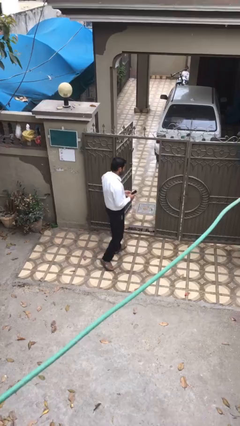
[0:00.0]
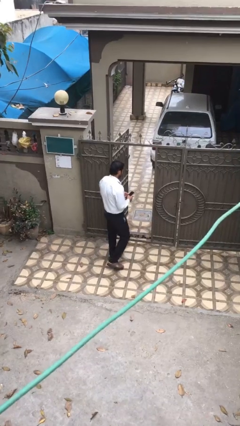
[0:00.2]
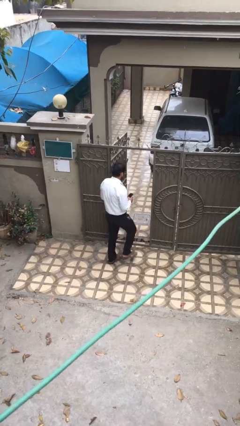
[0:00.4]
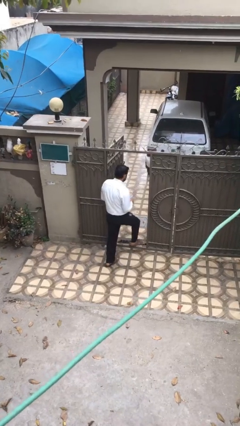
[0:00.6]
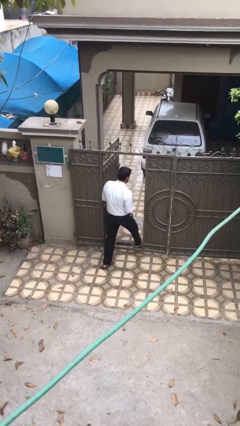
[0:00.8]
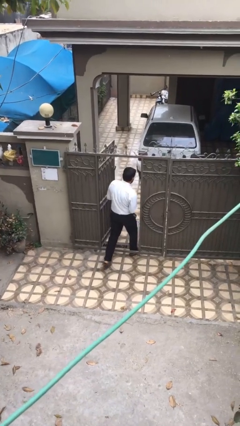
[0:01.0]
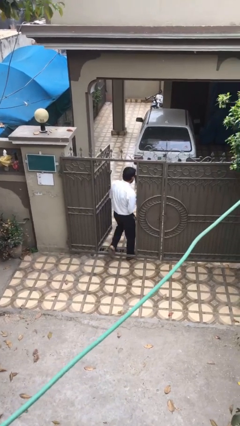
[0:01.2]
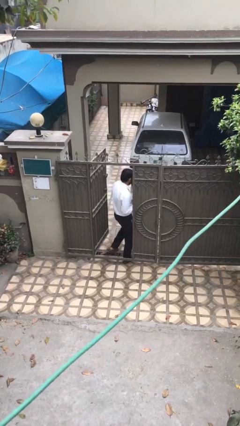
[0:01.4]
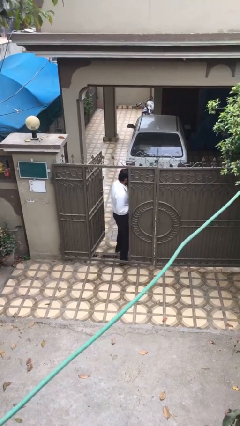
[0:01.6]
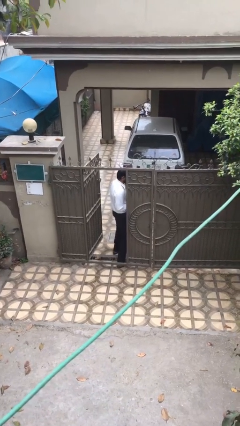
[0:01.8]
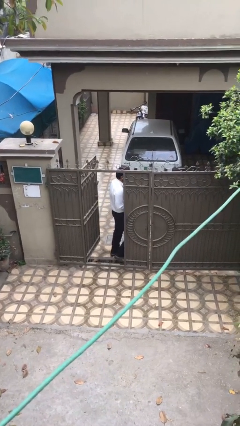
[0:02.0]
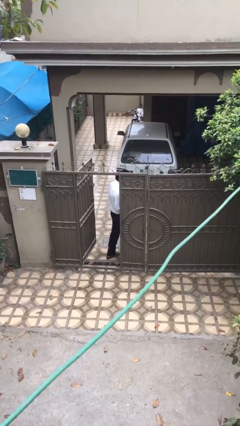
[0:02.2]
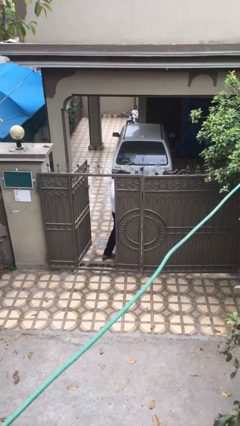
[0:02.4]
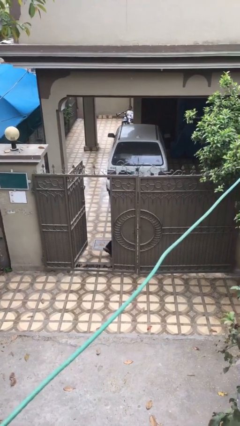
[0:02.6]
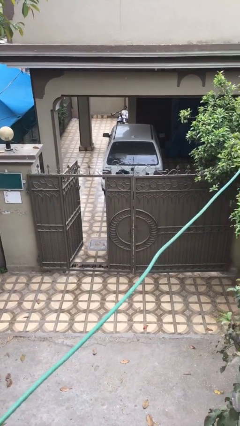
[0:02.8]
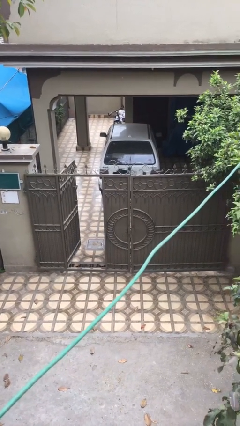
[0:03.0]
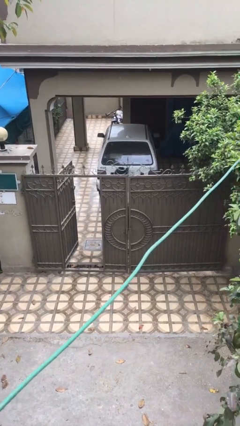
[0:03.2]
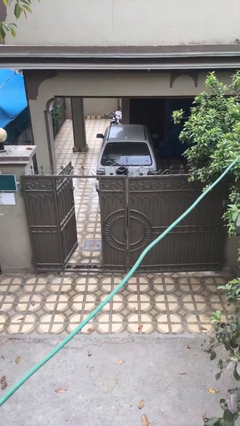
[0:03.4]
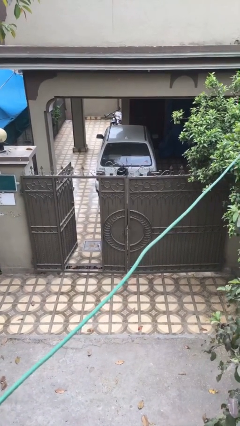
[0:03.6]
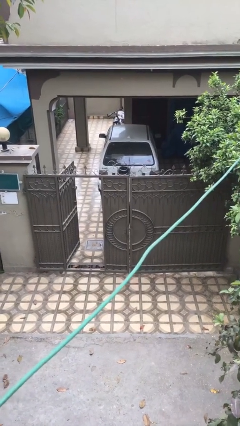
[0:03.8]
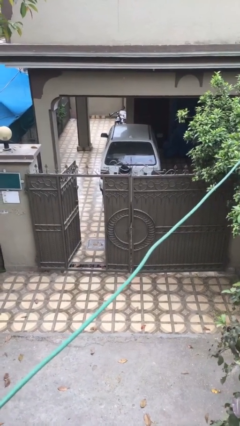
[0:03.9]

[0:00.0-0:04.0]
person exits scene through structure

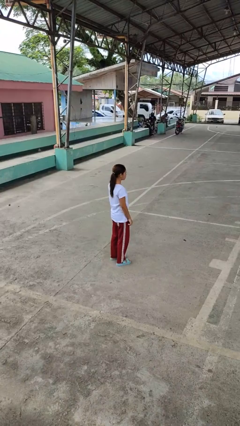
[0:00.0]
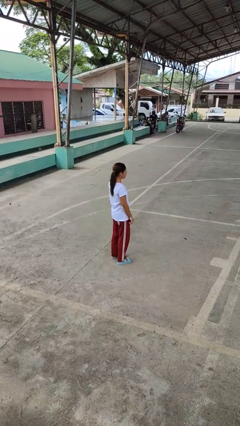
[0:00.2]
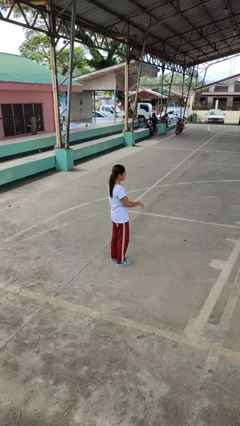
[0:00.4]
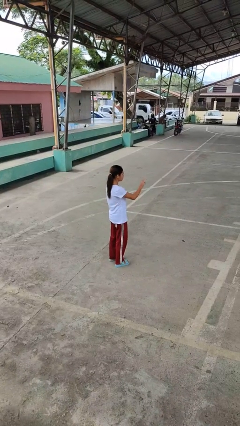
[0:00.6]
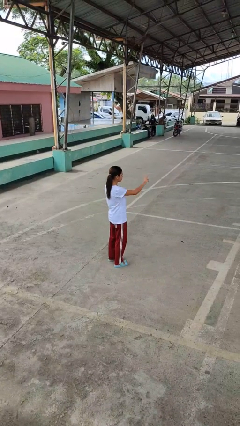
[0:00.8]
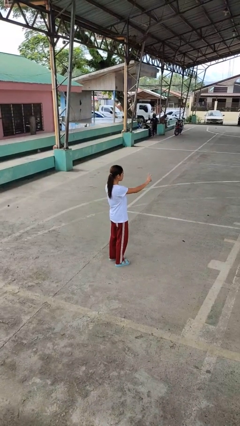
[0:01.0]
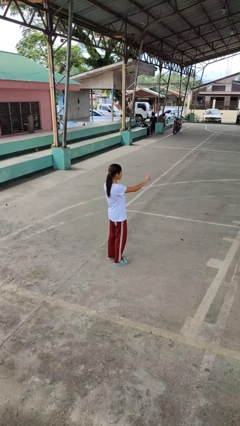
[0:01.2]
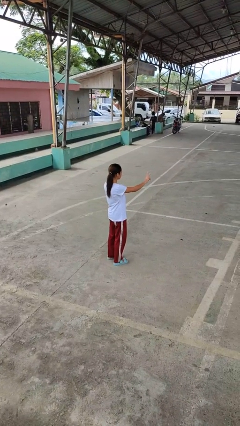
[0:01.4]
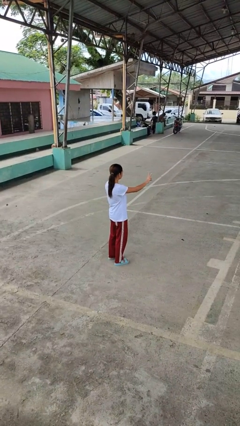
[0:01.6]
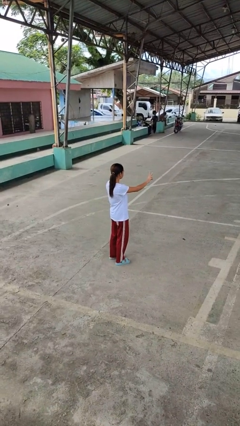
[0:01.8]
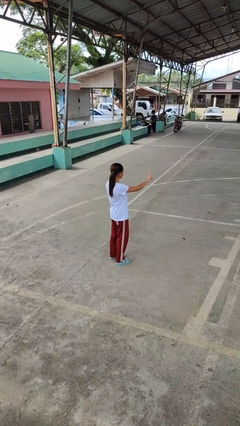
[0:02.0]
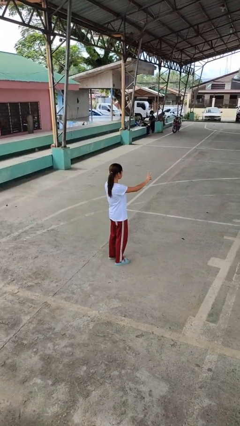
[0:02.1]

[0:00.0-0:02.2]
person gestures peace

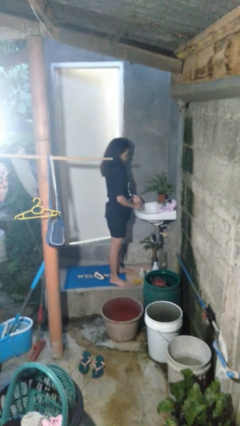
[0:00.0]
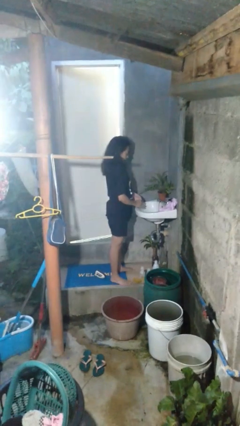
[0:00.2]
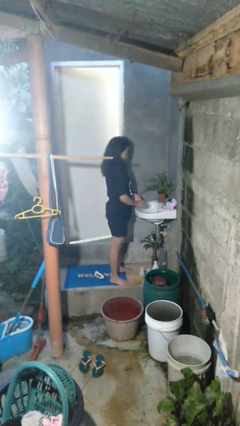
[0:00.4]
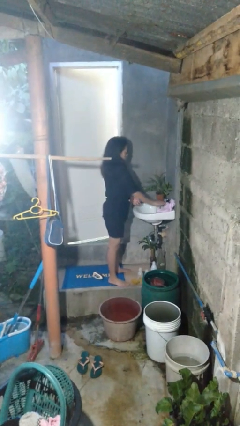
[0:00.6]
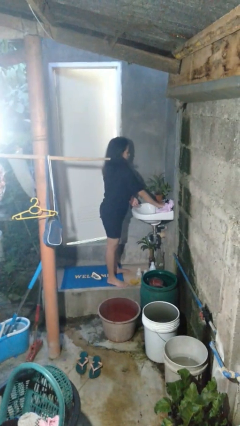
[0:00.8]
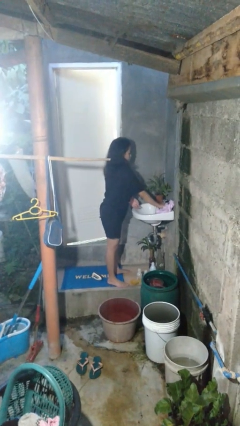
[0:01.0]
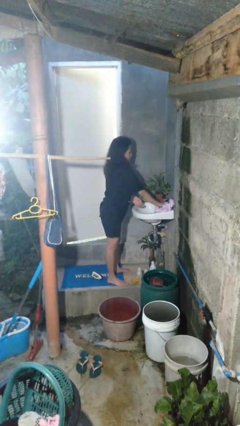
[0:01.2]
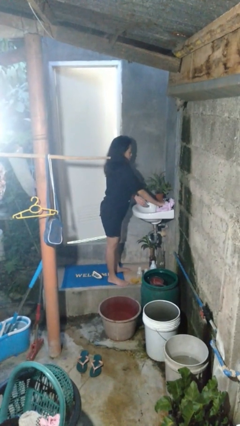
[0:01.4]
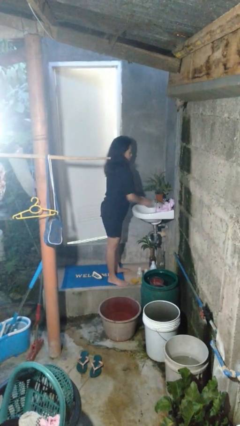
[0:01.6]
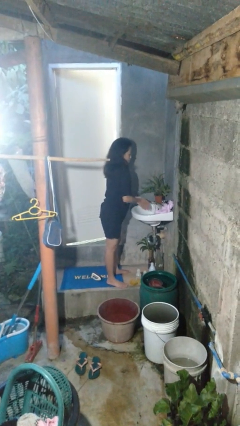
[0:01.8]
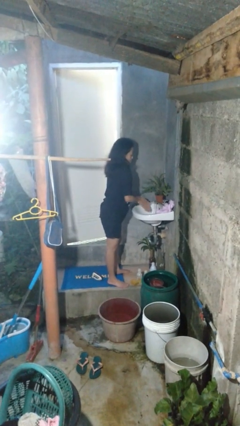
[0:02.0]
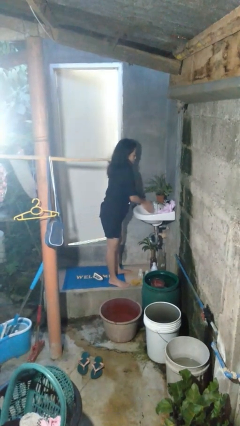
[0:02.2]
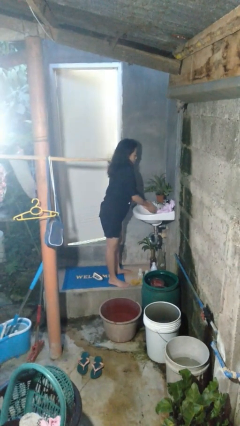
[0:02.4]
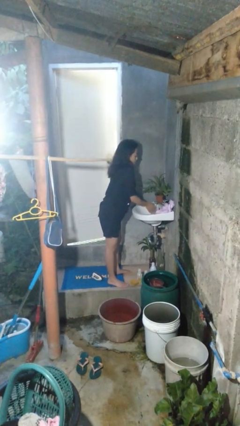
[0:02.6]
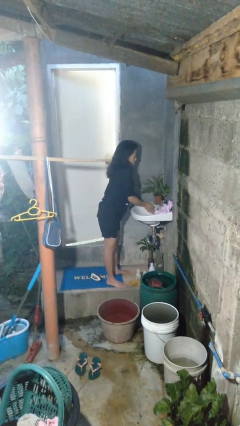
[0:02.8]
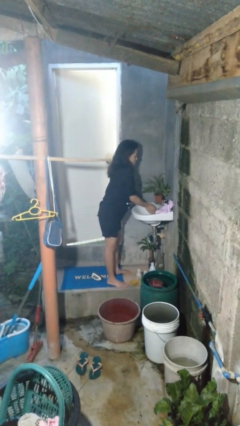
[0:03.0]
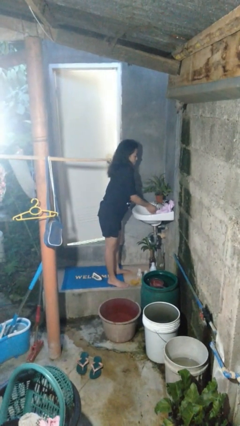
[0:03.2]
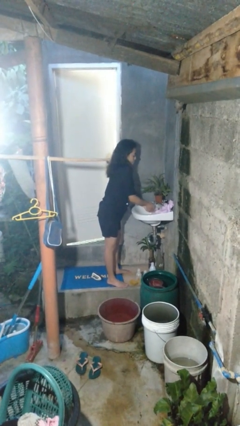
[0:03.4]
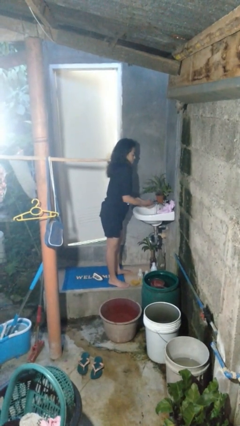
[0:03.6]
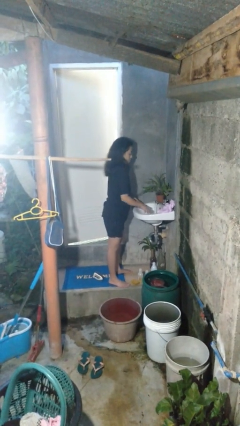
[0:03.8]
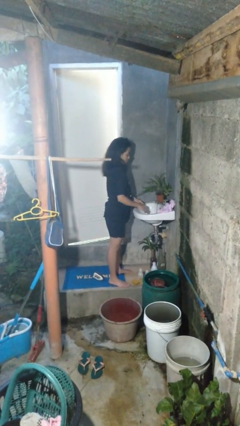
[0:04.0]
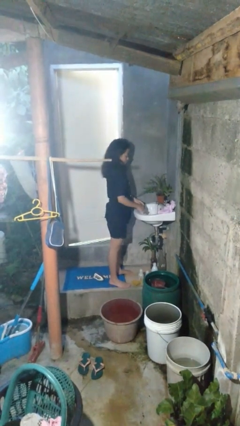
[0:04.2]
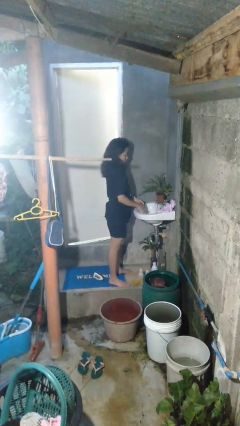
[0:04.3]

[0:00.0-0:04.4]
person washes hands

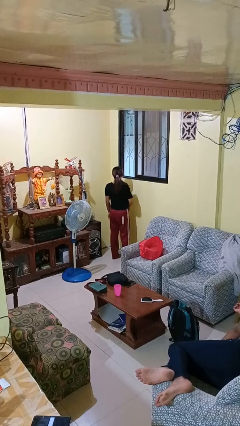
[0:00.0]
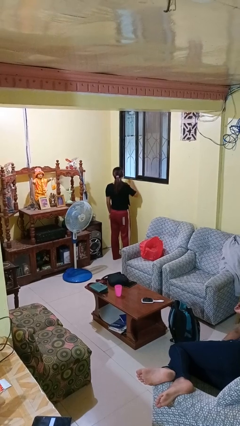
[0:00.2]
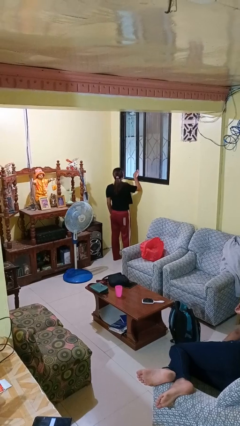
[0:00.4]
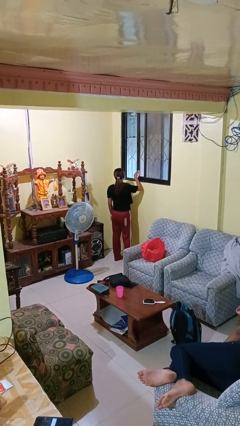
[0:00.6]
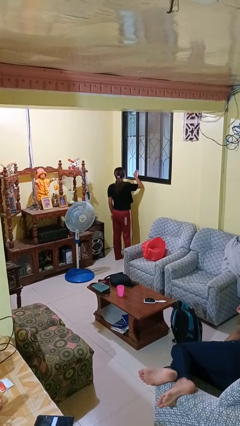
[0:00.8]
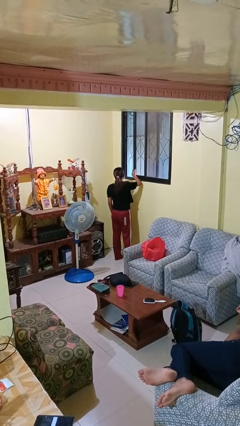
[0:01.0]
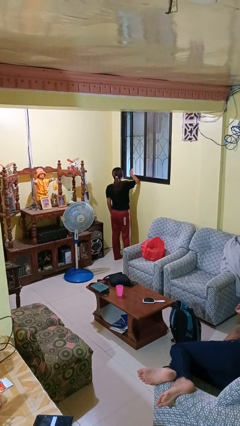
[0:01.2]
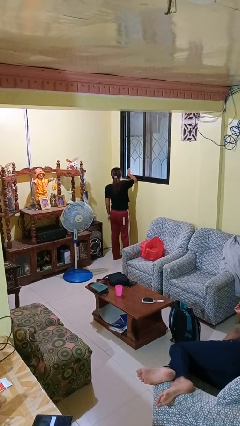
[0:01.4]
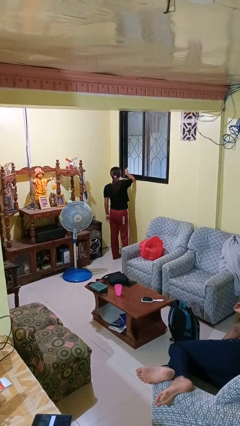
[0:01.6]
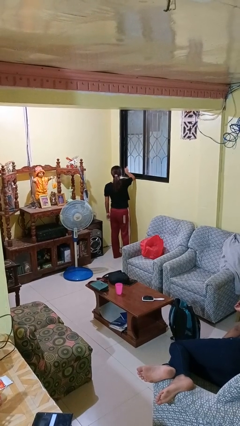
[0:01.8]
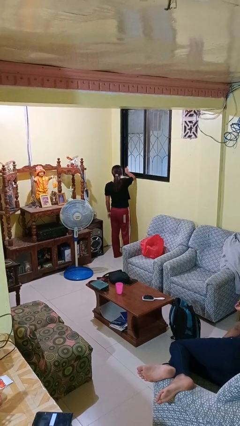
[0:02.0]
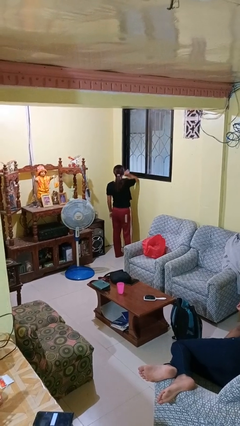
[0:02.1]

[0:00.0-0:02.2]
person closes home window

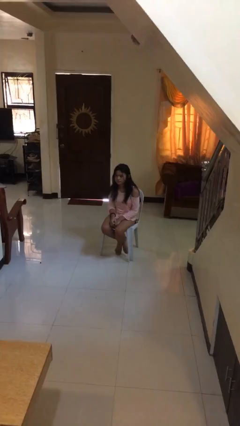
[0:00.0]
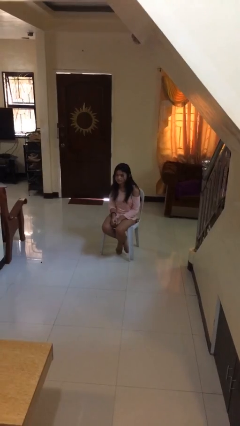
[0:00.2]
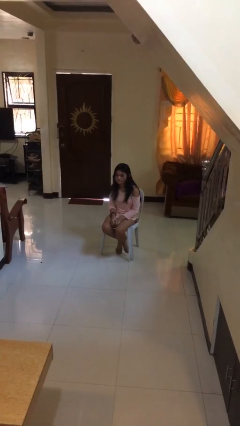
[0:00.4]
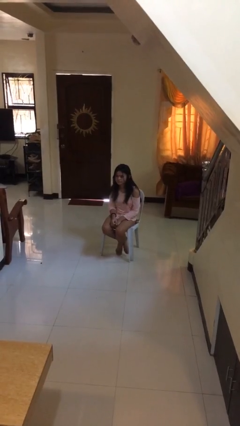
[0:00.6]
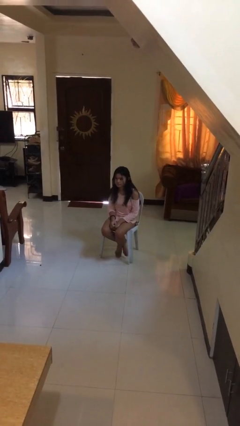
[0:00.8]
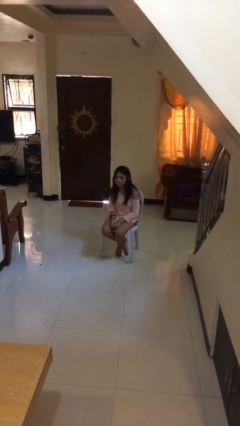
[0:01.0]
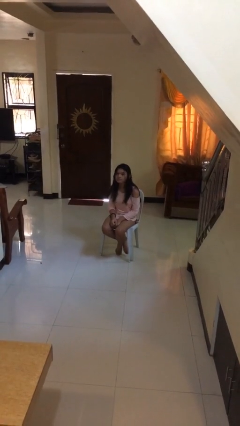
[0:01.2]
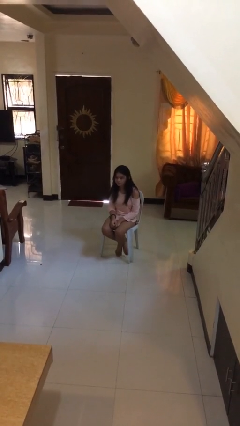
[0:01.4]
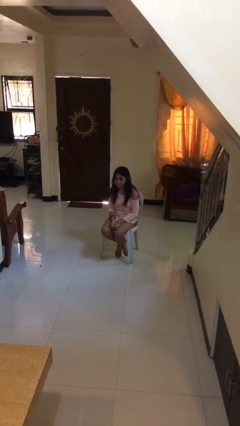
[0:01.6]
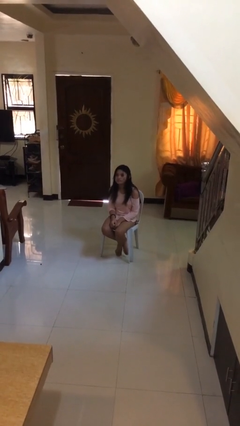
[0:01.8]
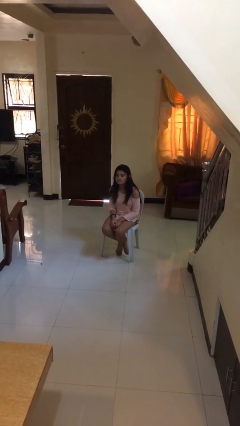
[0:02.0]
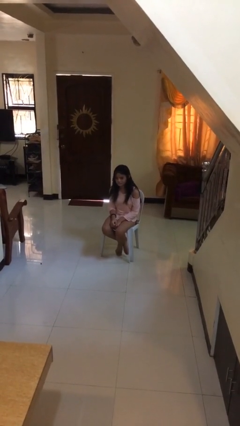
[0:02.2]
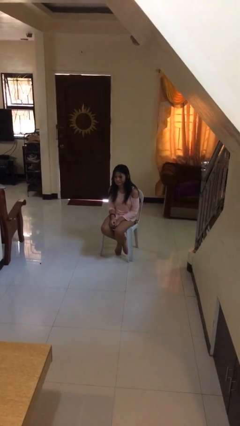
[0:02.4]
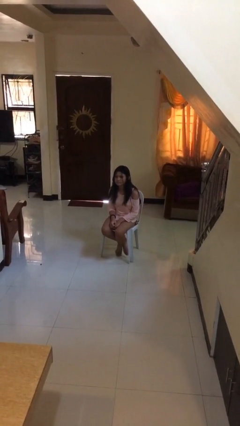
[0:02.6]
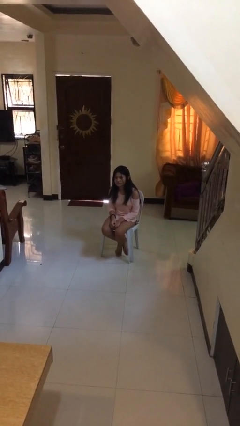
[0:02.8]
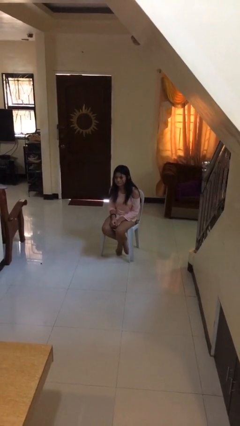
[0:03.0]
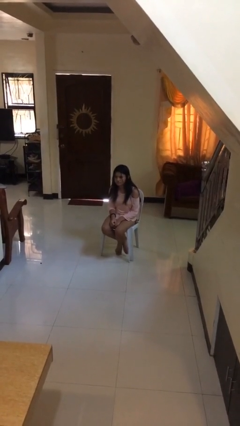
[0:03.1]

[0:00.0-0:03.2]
person nods head

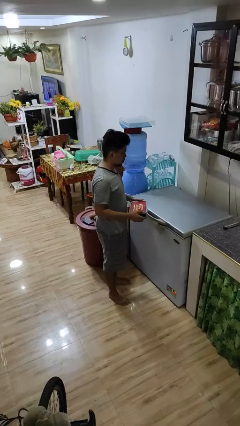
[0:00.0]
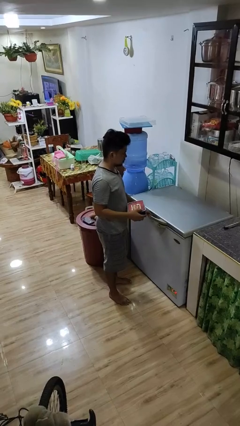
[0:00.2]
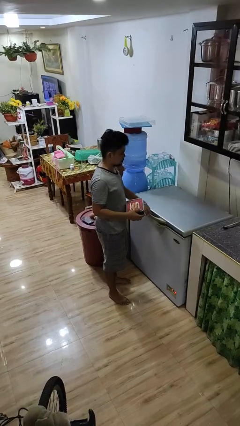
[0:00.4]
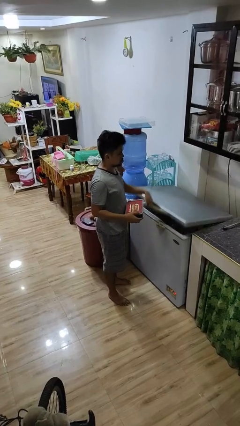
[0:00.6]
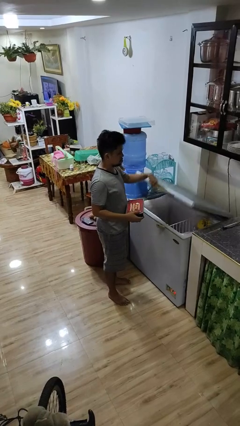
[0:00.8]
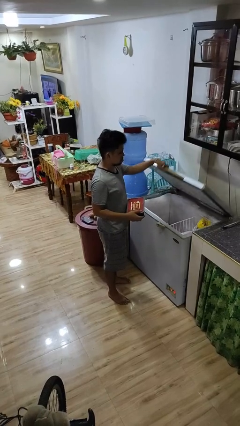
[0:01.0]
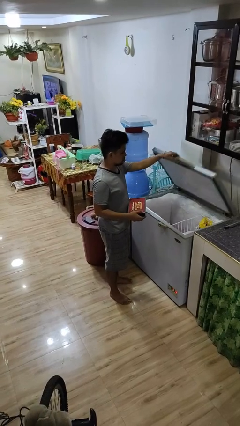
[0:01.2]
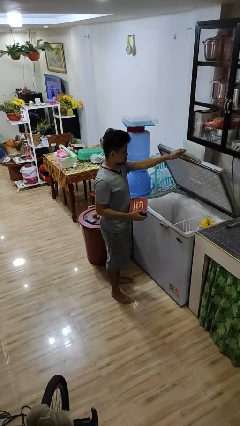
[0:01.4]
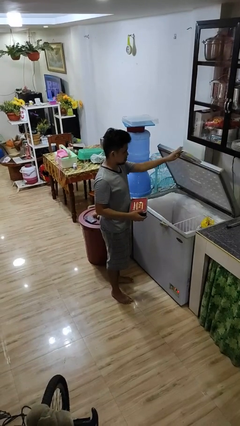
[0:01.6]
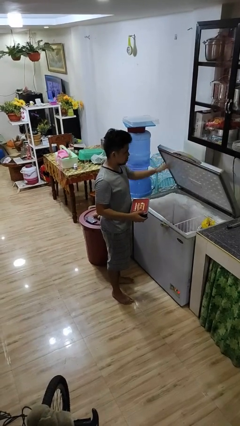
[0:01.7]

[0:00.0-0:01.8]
person opens refrigerator
